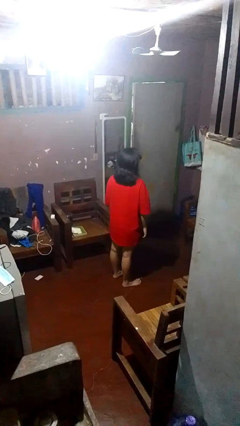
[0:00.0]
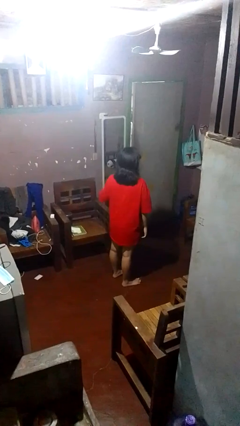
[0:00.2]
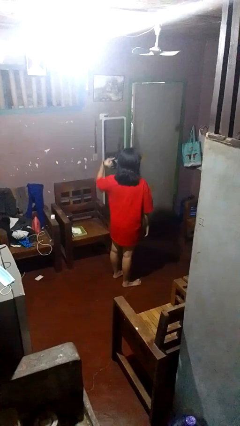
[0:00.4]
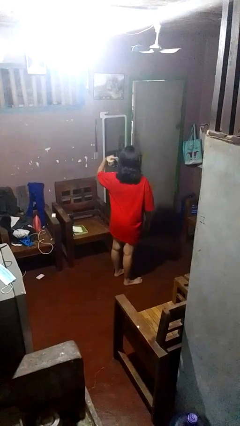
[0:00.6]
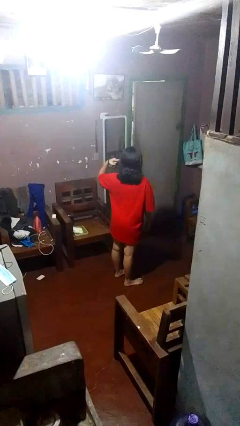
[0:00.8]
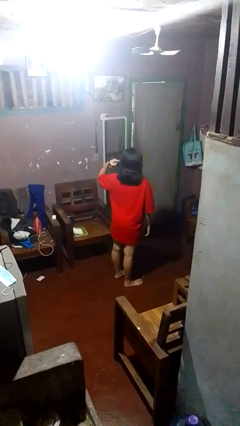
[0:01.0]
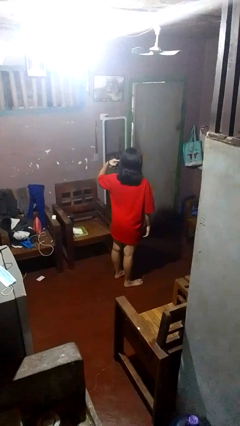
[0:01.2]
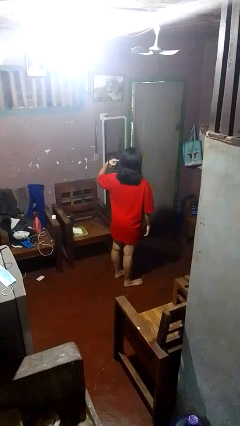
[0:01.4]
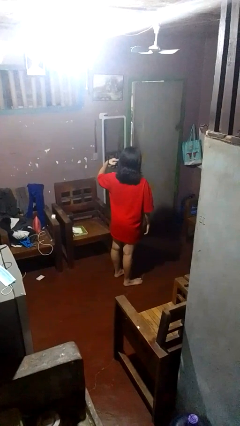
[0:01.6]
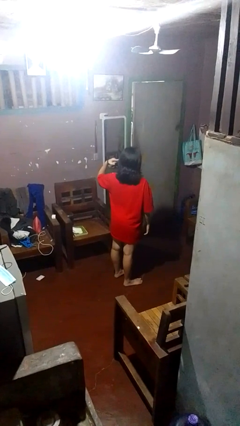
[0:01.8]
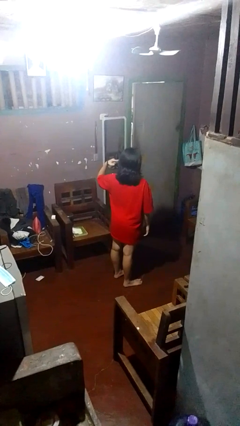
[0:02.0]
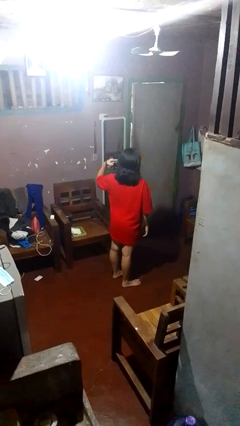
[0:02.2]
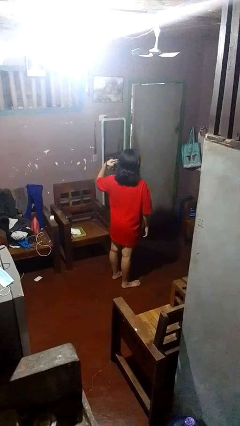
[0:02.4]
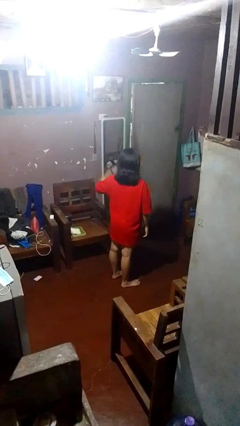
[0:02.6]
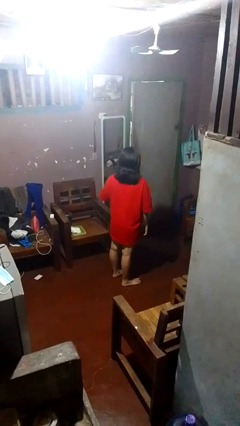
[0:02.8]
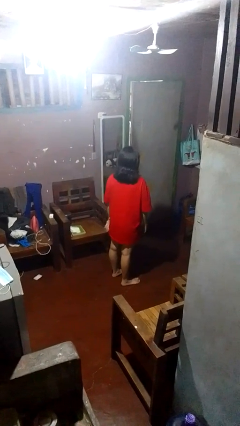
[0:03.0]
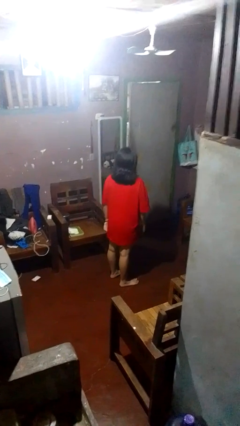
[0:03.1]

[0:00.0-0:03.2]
person gestures listen closely

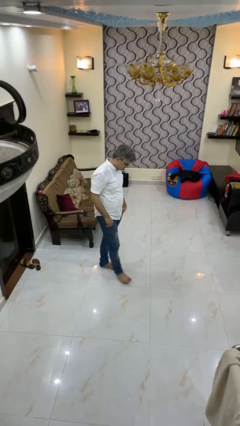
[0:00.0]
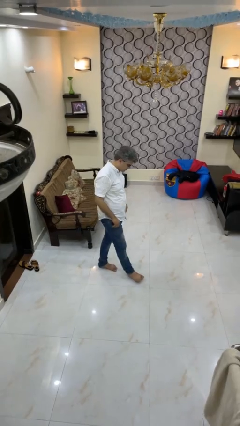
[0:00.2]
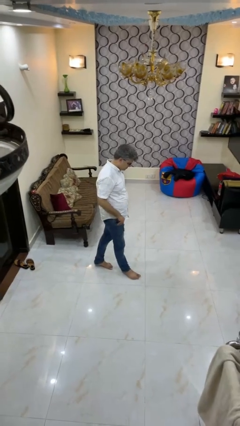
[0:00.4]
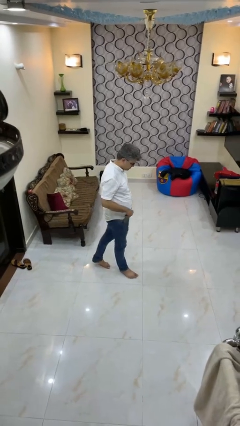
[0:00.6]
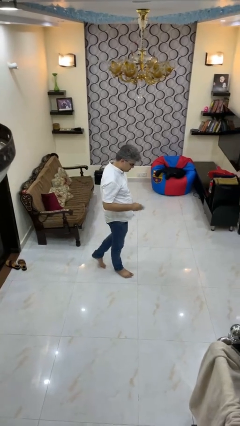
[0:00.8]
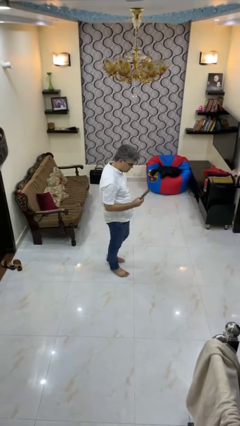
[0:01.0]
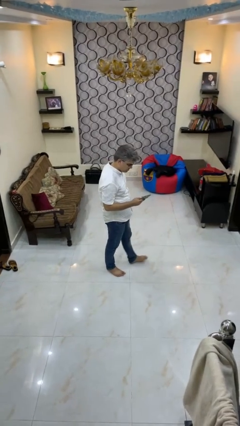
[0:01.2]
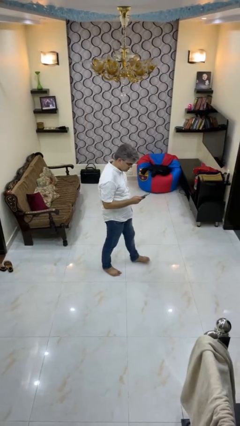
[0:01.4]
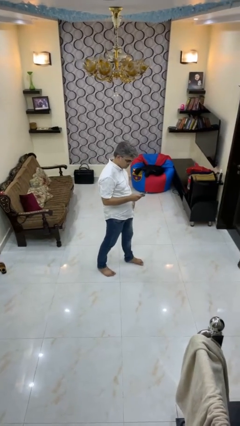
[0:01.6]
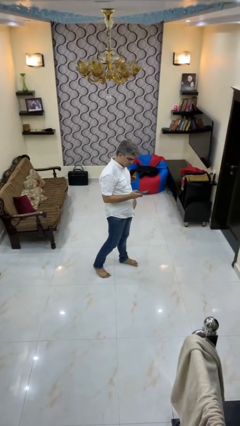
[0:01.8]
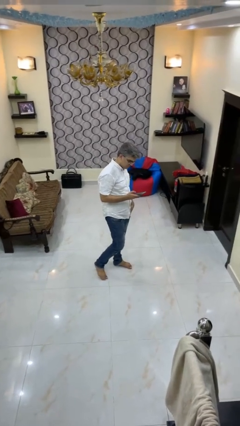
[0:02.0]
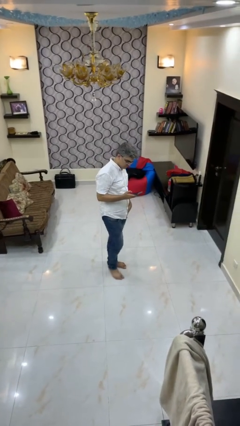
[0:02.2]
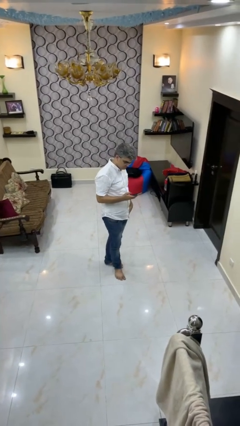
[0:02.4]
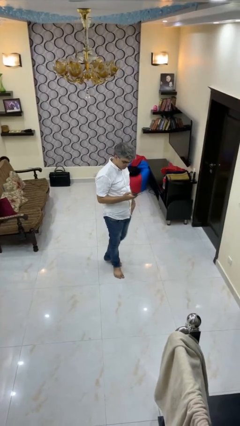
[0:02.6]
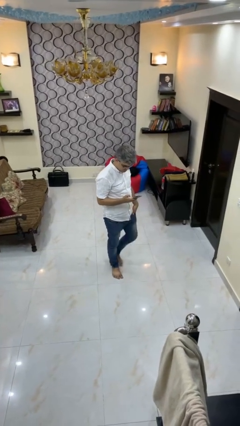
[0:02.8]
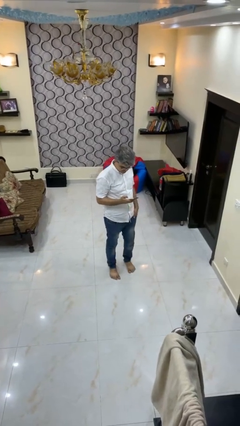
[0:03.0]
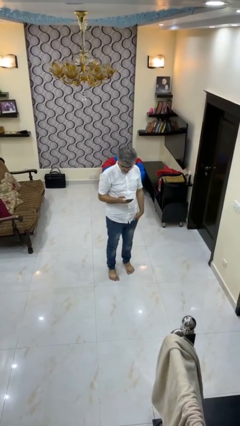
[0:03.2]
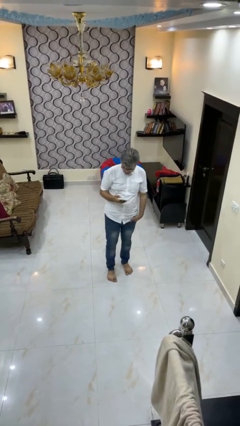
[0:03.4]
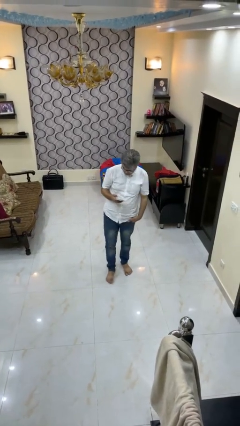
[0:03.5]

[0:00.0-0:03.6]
person takes phone from pocket

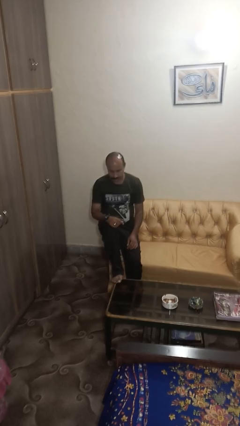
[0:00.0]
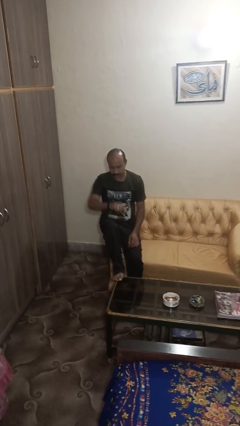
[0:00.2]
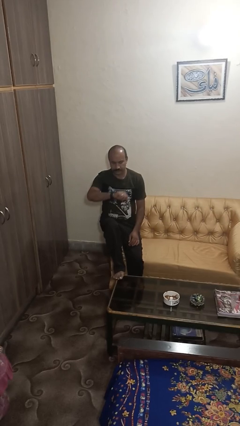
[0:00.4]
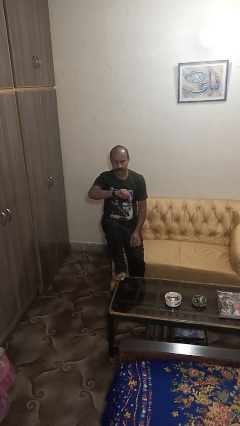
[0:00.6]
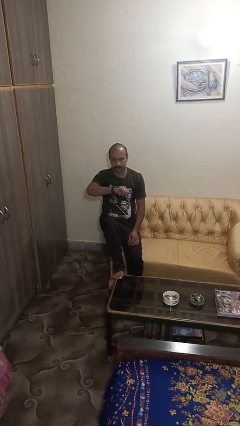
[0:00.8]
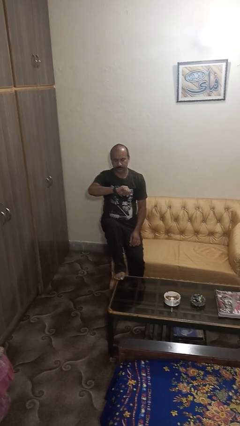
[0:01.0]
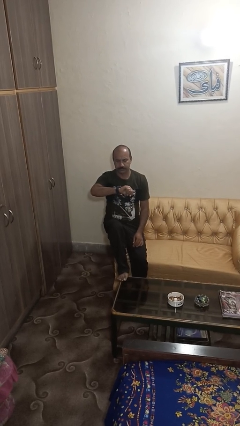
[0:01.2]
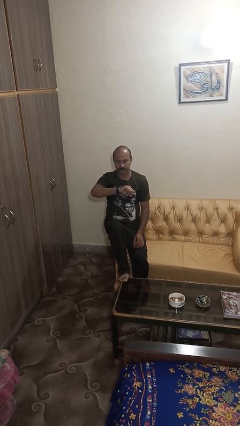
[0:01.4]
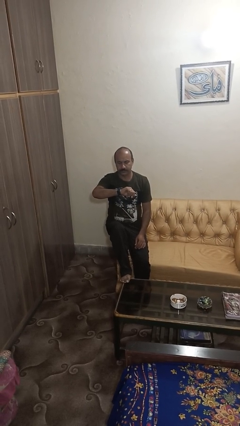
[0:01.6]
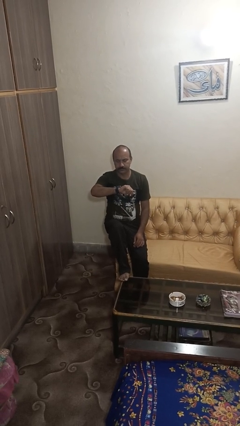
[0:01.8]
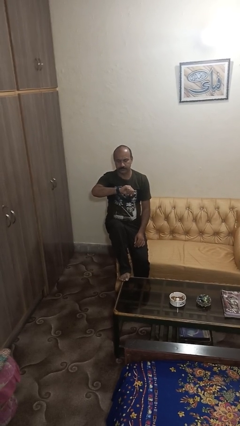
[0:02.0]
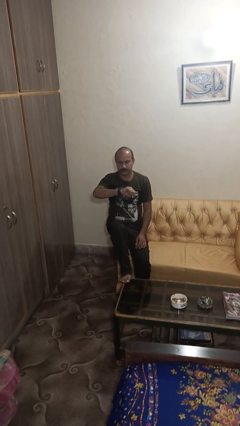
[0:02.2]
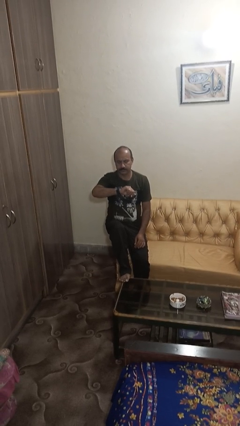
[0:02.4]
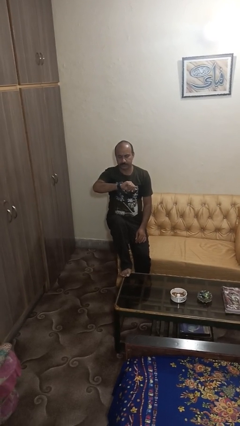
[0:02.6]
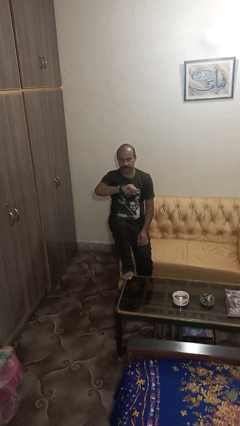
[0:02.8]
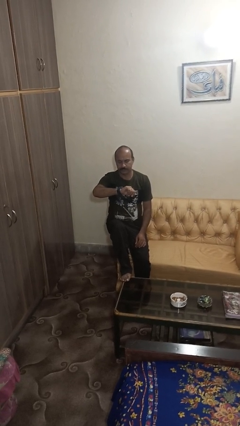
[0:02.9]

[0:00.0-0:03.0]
person looks at wristwatch

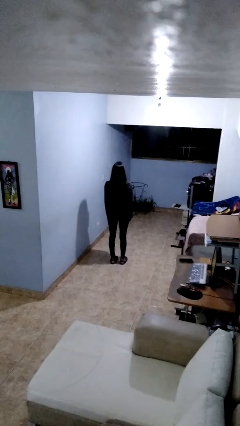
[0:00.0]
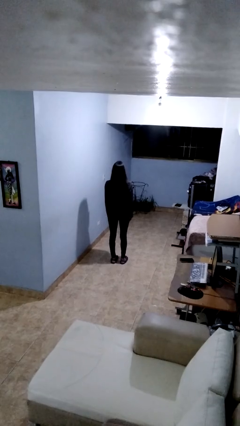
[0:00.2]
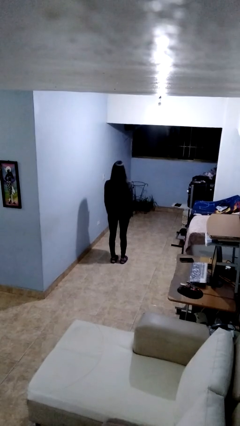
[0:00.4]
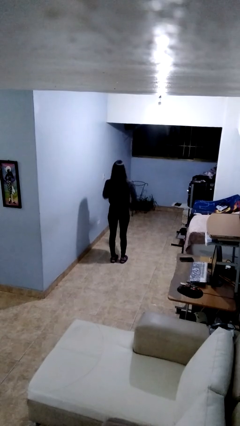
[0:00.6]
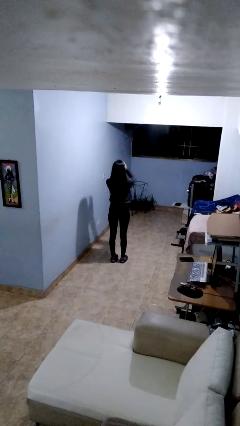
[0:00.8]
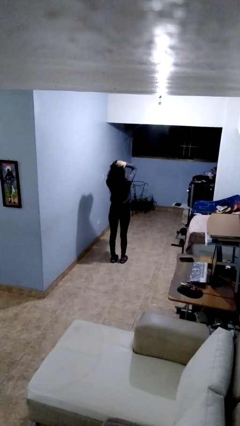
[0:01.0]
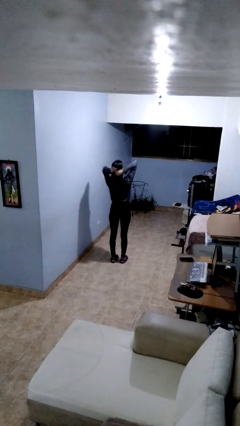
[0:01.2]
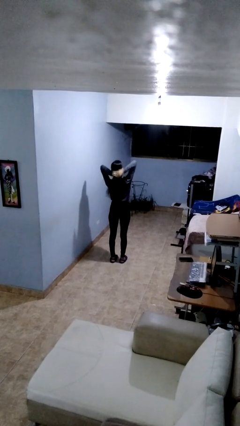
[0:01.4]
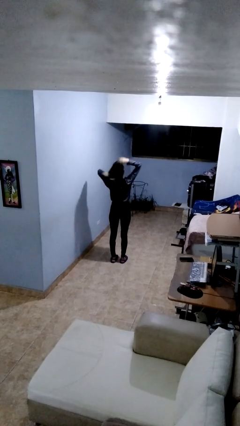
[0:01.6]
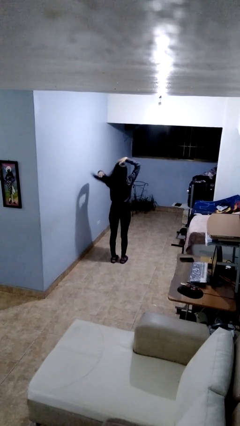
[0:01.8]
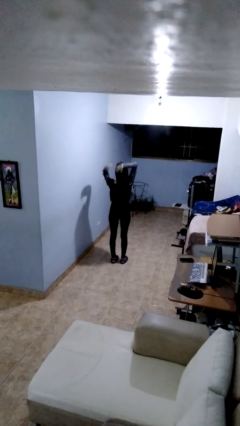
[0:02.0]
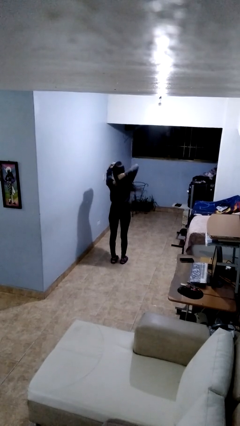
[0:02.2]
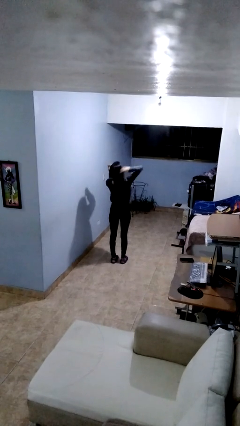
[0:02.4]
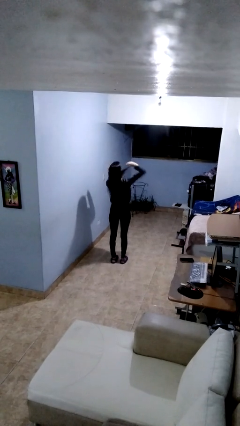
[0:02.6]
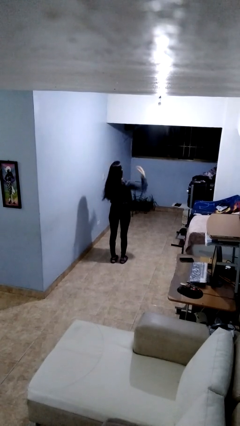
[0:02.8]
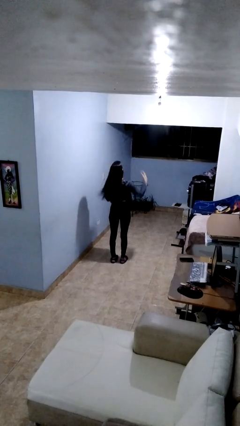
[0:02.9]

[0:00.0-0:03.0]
person strokes hair

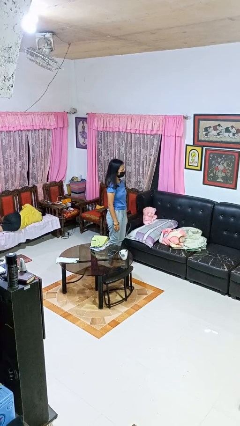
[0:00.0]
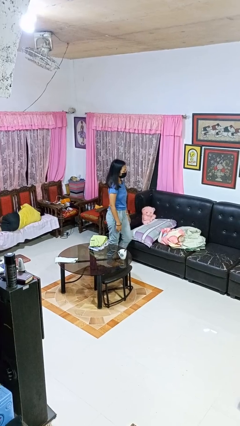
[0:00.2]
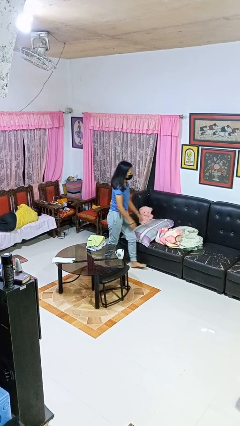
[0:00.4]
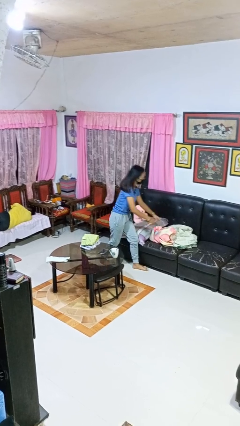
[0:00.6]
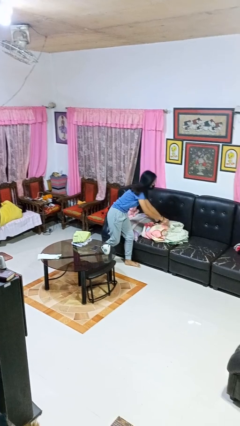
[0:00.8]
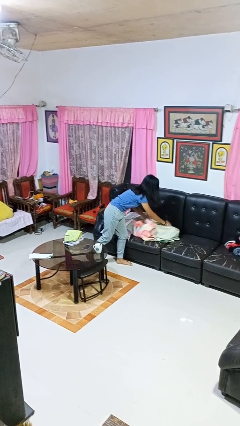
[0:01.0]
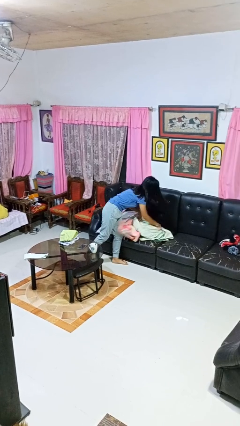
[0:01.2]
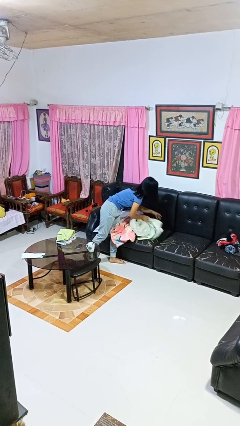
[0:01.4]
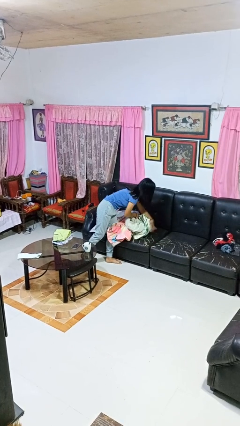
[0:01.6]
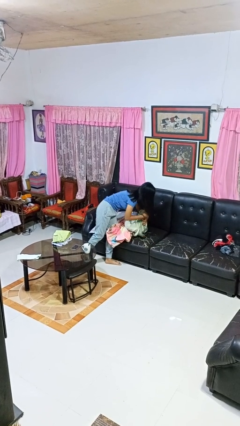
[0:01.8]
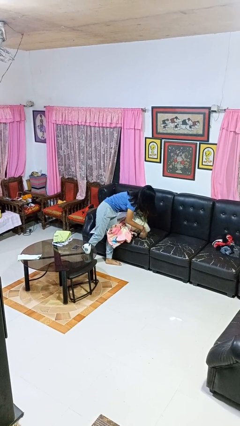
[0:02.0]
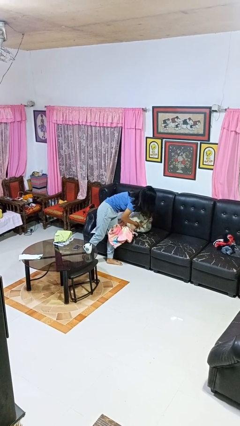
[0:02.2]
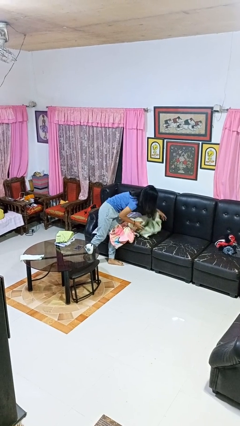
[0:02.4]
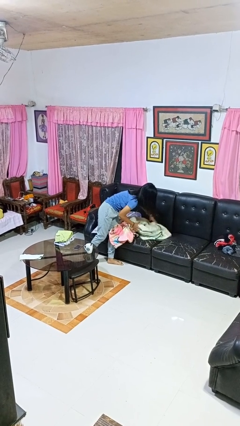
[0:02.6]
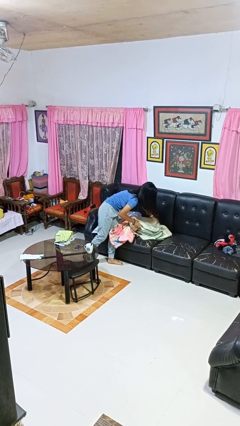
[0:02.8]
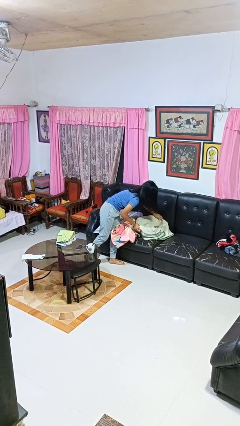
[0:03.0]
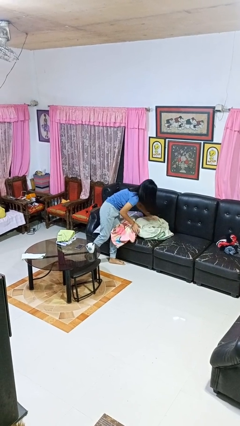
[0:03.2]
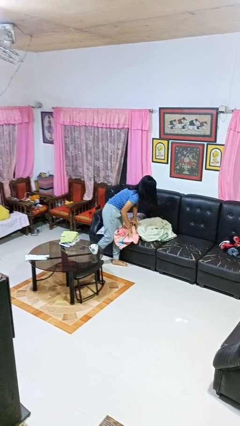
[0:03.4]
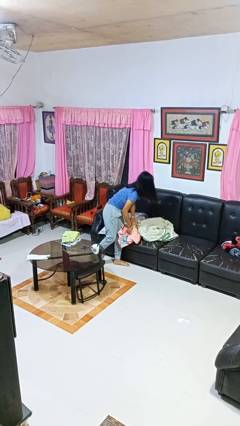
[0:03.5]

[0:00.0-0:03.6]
person searches in couch

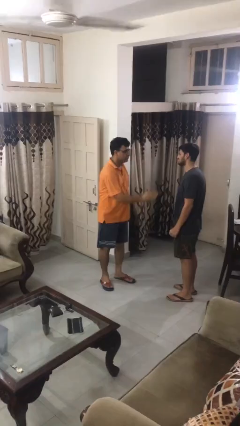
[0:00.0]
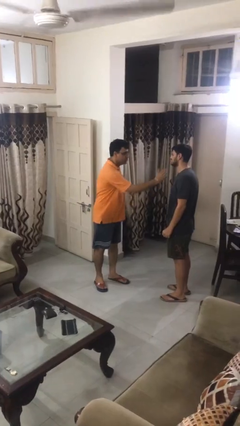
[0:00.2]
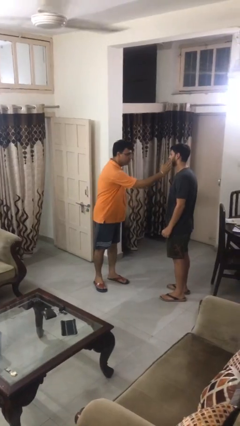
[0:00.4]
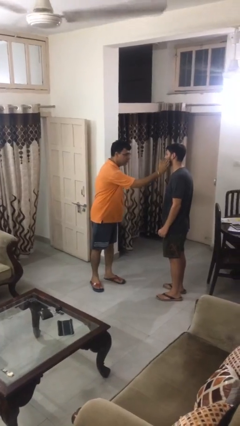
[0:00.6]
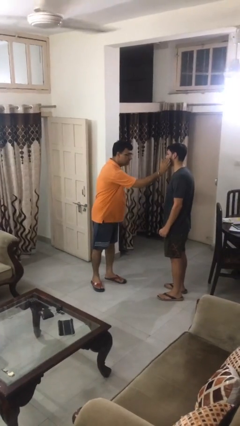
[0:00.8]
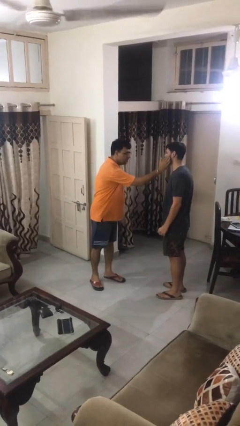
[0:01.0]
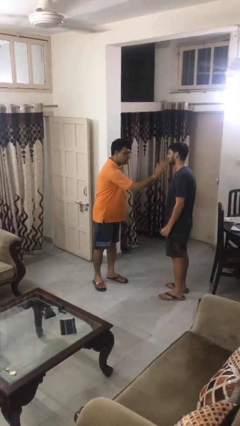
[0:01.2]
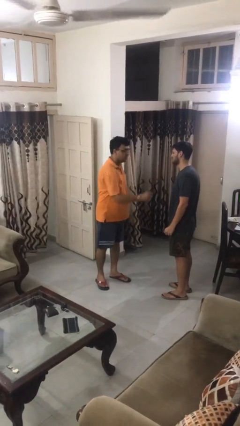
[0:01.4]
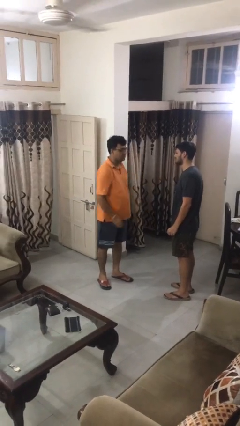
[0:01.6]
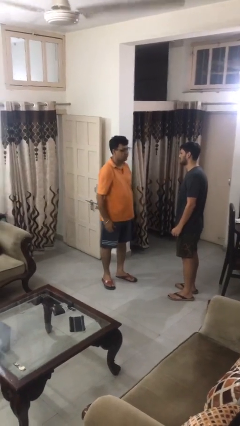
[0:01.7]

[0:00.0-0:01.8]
person touches face of person
